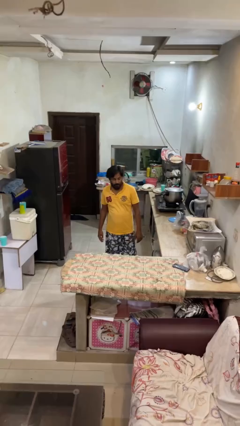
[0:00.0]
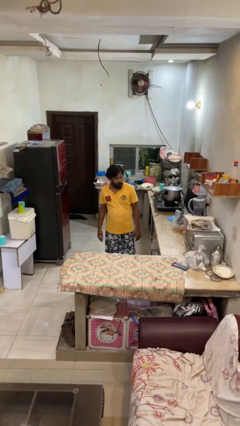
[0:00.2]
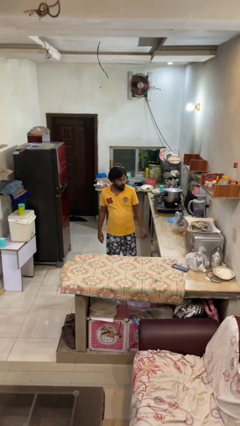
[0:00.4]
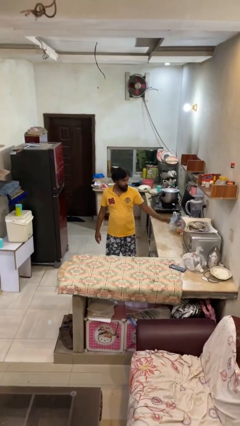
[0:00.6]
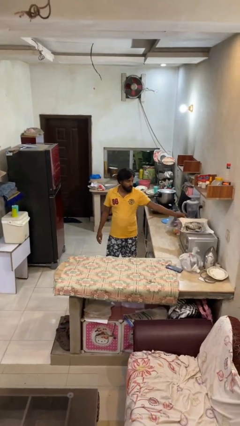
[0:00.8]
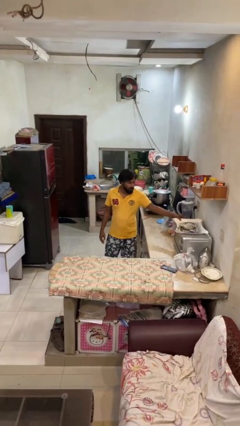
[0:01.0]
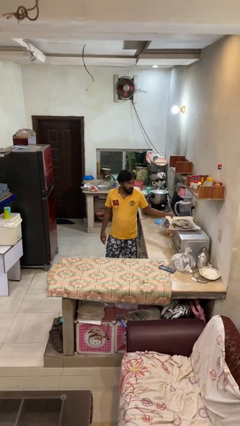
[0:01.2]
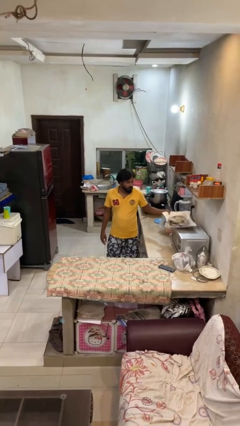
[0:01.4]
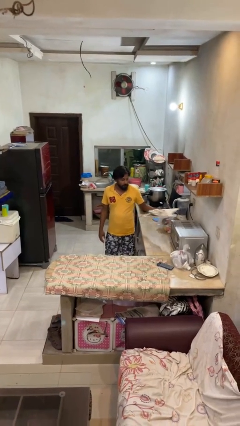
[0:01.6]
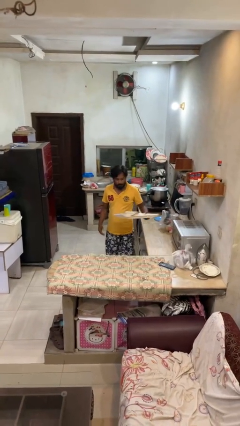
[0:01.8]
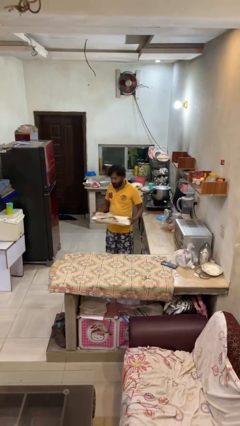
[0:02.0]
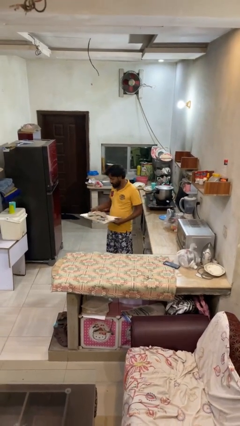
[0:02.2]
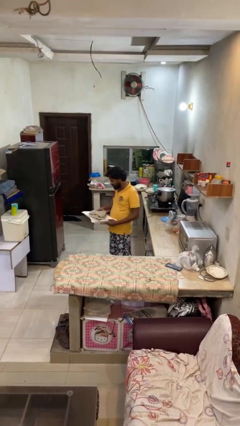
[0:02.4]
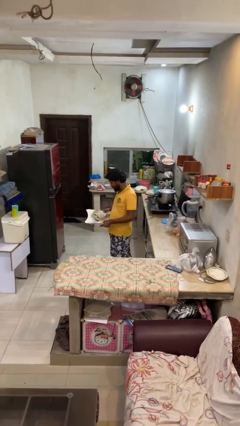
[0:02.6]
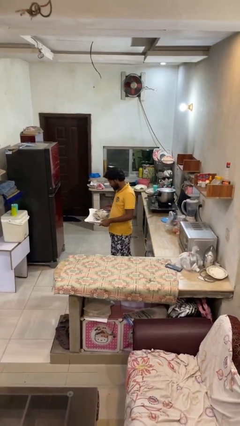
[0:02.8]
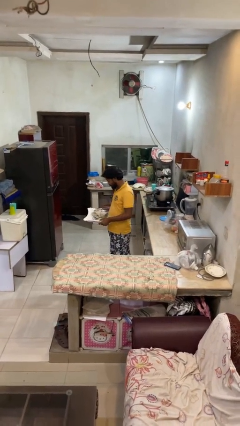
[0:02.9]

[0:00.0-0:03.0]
person picks up object from countertop

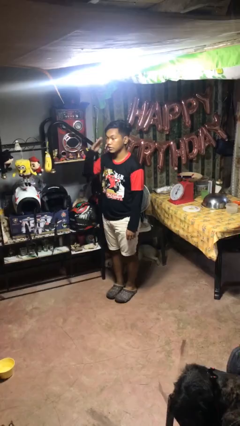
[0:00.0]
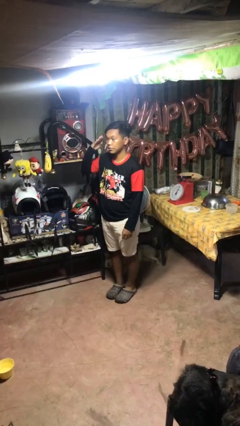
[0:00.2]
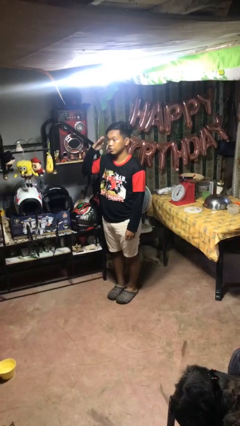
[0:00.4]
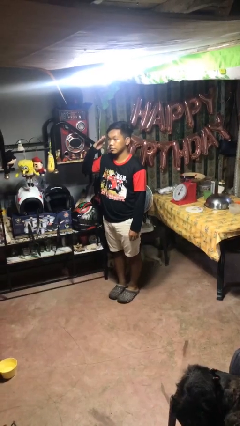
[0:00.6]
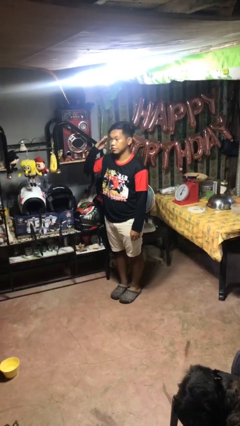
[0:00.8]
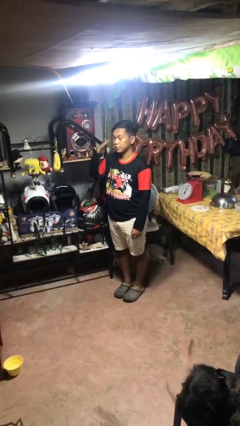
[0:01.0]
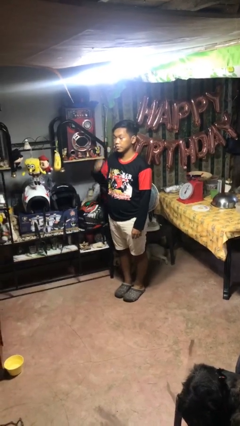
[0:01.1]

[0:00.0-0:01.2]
person salutes

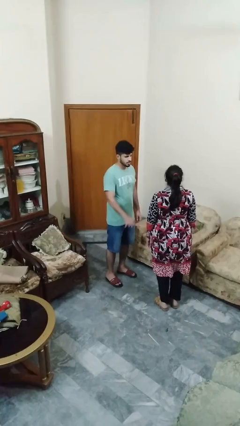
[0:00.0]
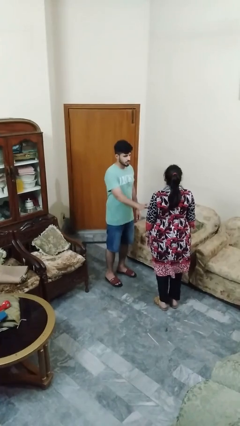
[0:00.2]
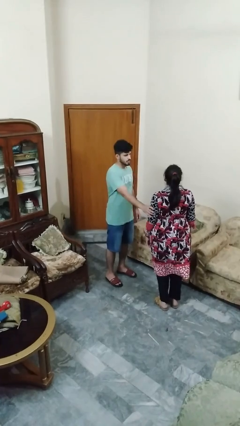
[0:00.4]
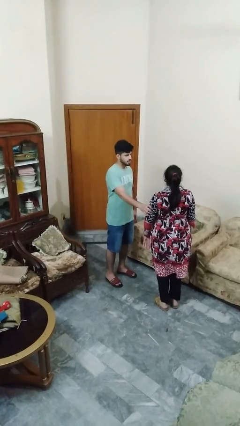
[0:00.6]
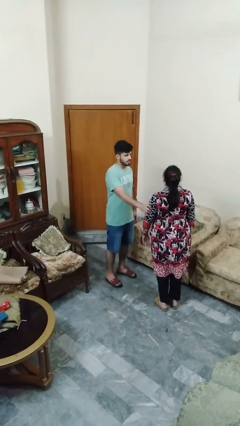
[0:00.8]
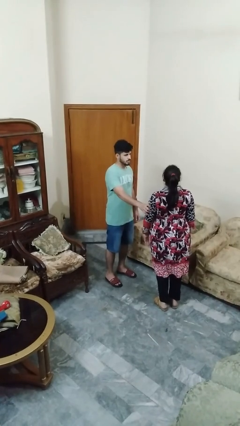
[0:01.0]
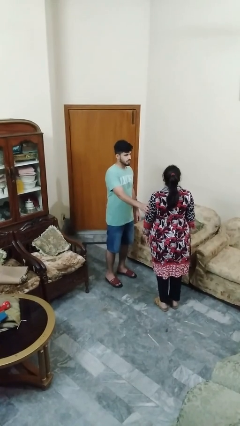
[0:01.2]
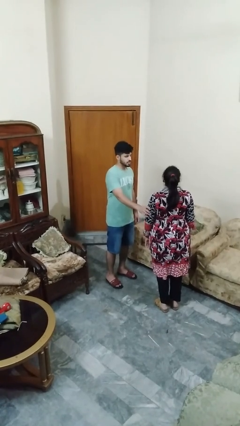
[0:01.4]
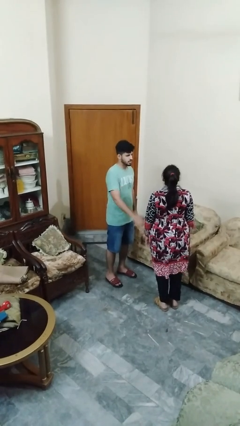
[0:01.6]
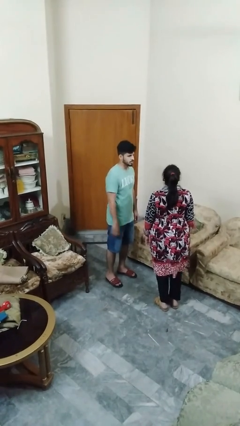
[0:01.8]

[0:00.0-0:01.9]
person grabs person by bicep

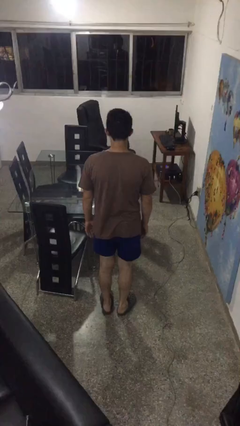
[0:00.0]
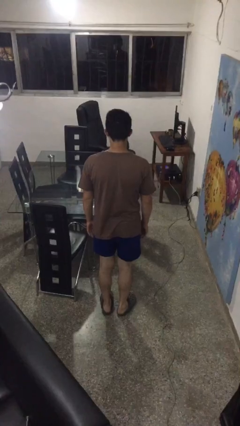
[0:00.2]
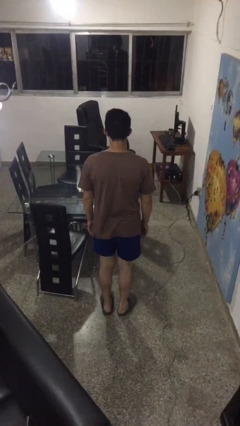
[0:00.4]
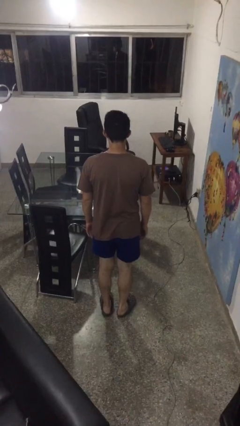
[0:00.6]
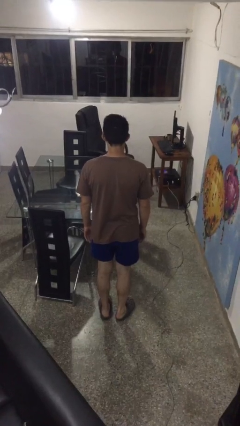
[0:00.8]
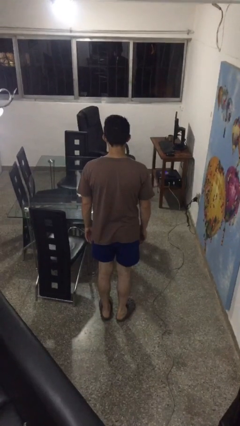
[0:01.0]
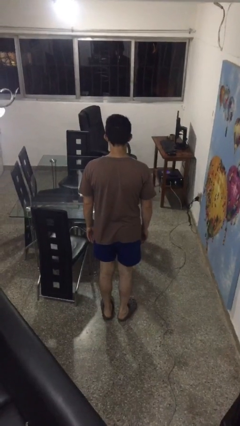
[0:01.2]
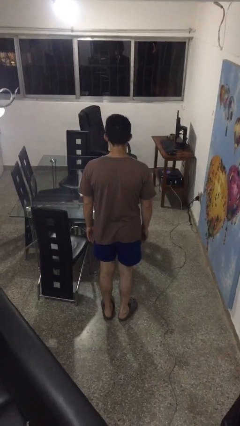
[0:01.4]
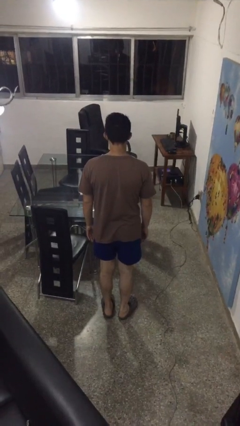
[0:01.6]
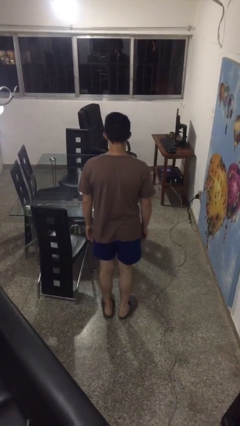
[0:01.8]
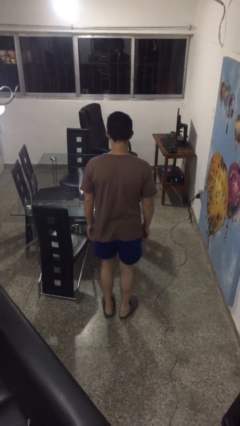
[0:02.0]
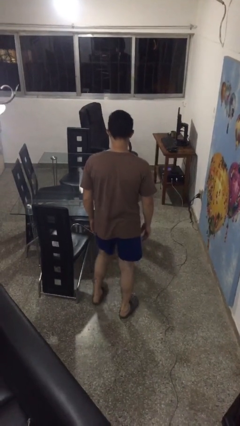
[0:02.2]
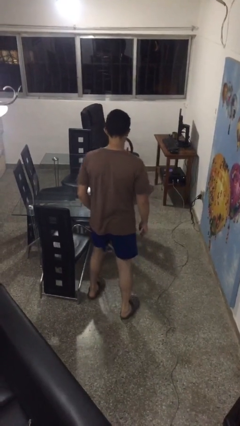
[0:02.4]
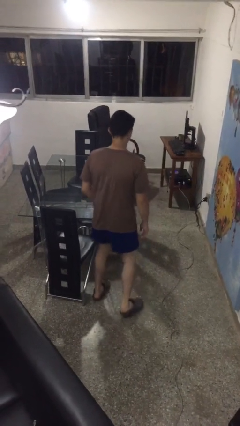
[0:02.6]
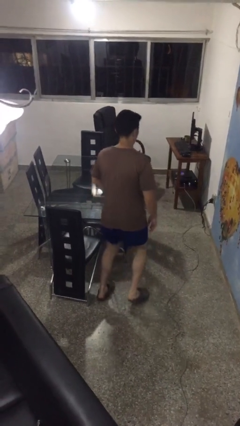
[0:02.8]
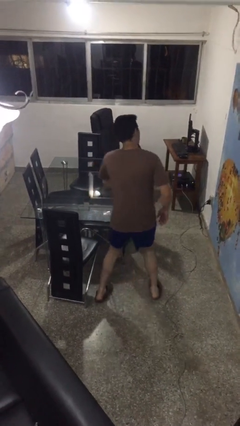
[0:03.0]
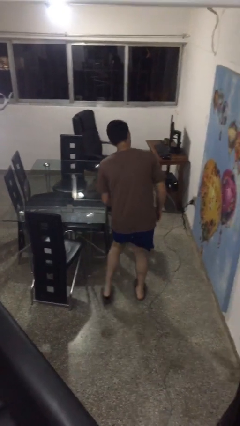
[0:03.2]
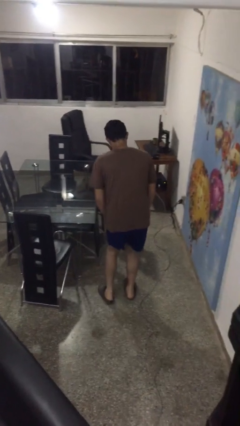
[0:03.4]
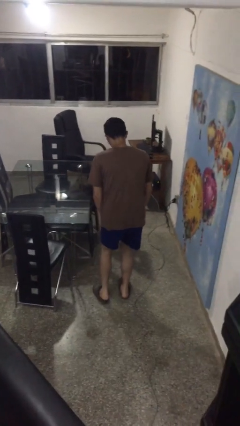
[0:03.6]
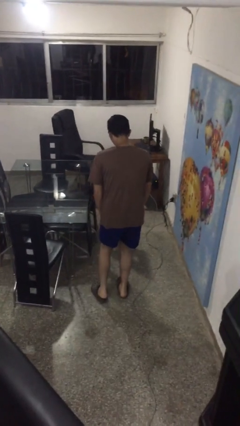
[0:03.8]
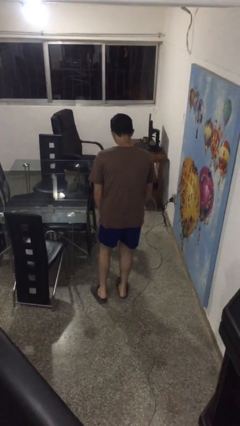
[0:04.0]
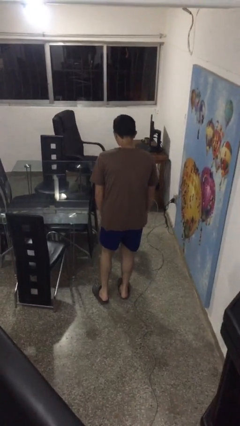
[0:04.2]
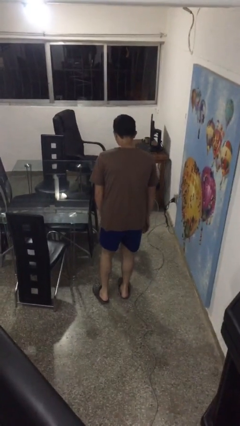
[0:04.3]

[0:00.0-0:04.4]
person bumps into table

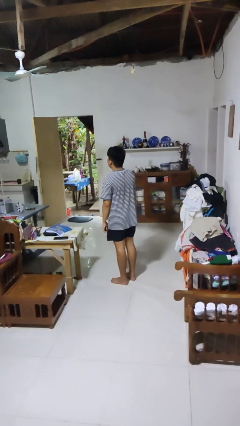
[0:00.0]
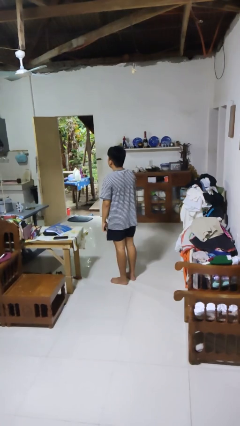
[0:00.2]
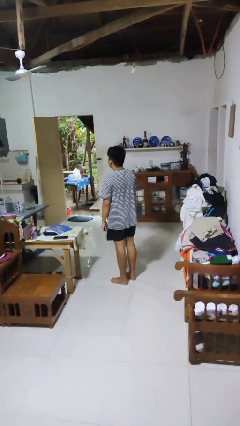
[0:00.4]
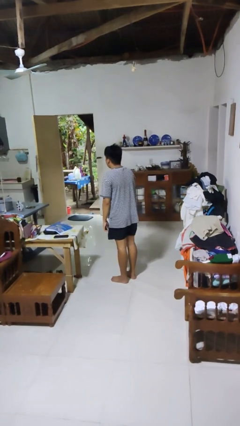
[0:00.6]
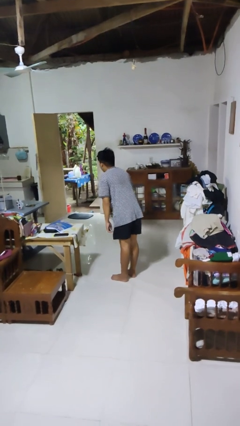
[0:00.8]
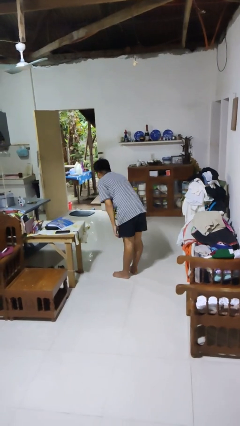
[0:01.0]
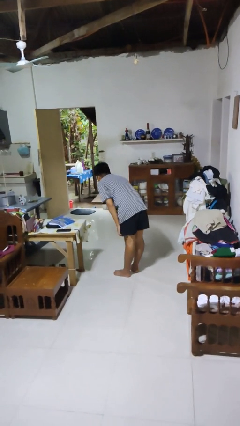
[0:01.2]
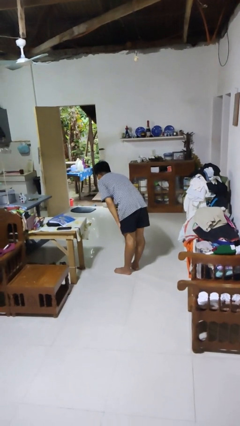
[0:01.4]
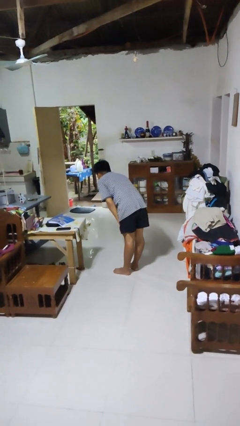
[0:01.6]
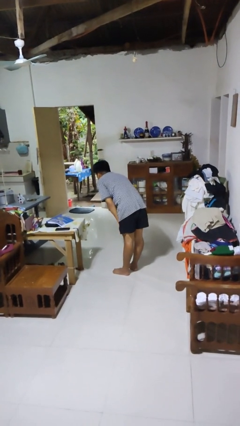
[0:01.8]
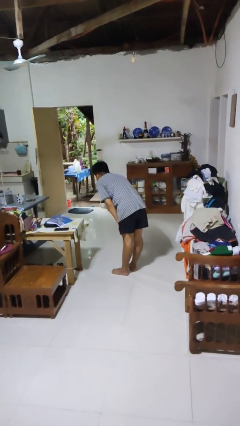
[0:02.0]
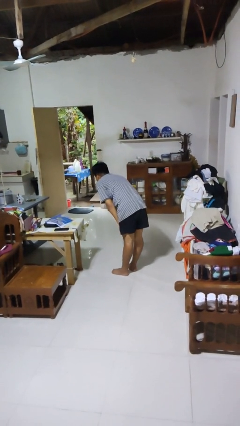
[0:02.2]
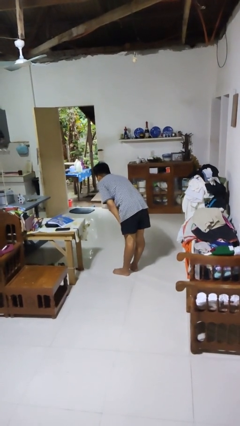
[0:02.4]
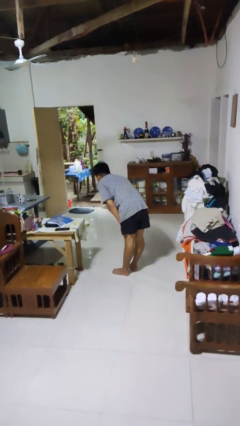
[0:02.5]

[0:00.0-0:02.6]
person bows

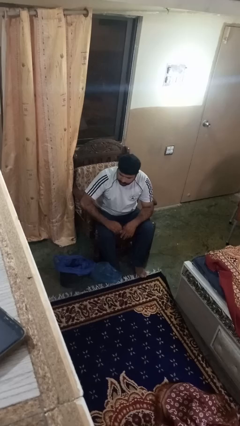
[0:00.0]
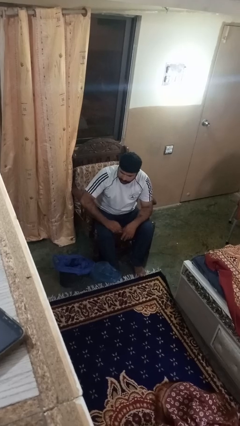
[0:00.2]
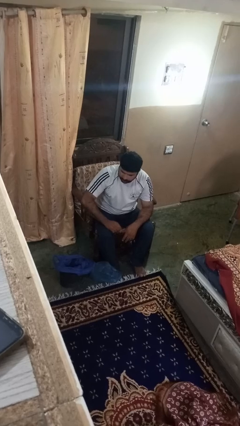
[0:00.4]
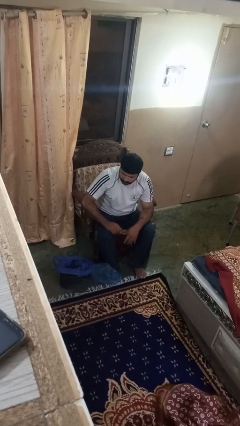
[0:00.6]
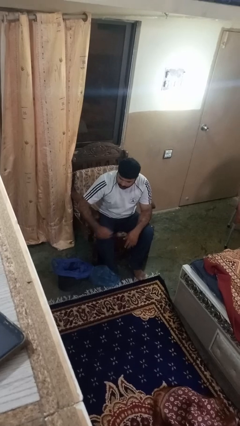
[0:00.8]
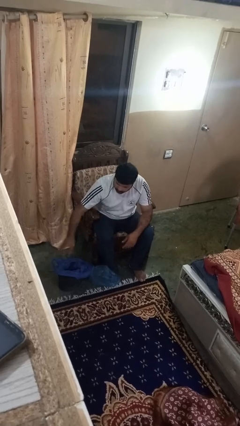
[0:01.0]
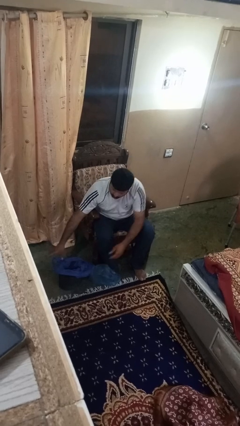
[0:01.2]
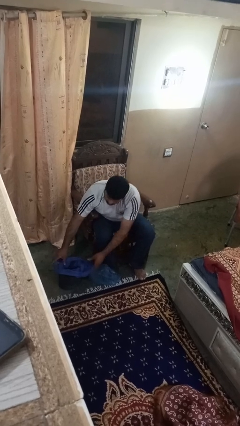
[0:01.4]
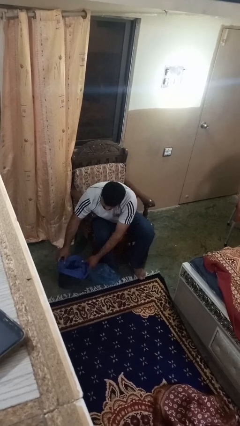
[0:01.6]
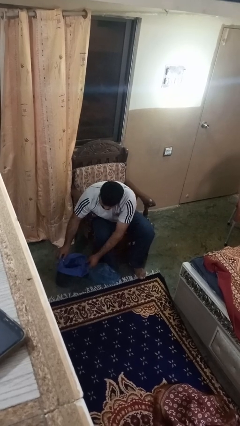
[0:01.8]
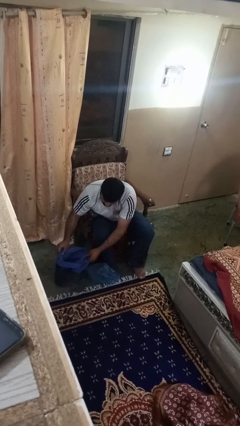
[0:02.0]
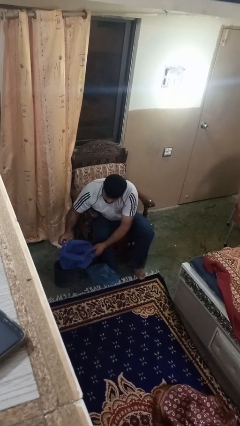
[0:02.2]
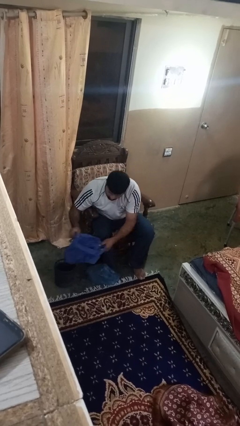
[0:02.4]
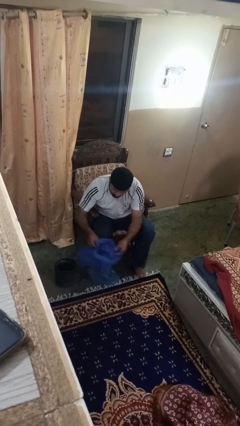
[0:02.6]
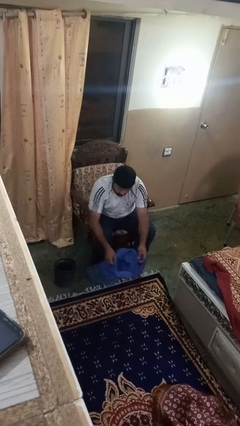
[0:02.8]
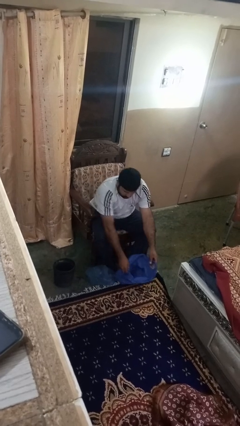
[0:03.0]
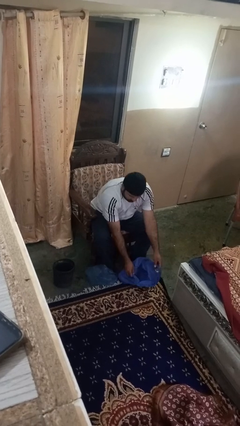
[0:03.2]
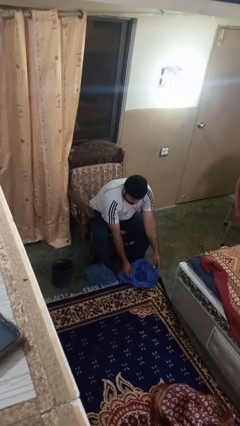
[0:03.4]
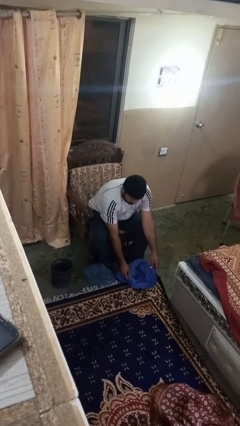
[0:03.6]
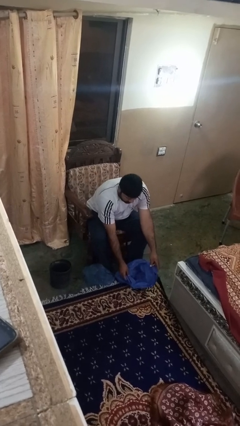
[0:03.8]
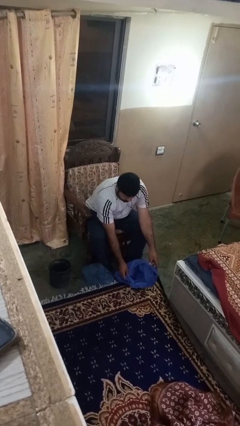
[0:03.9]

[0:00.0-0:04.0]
person removes trashbag from trashcan

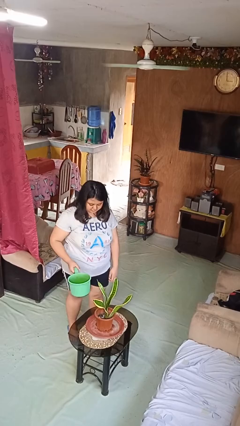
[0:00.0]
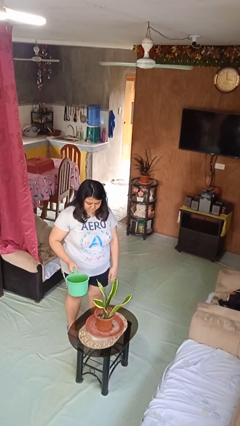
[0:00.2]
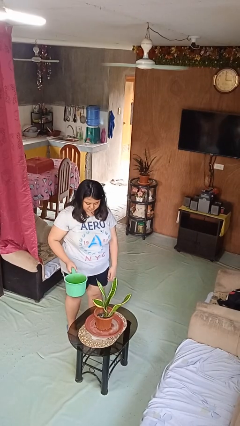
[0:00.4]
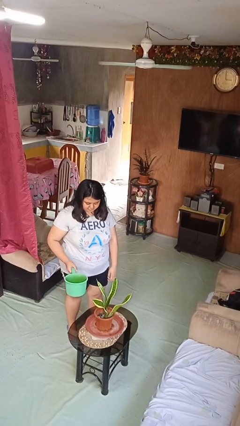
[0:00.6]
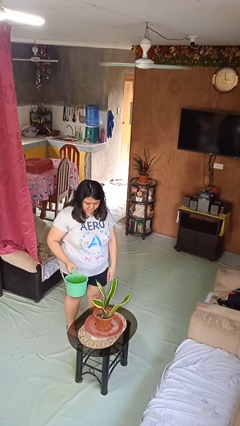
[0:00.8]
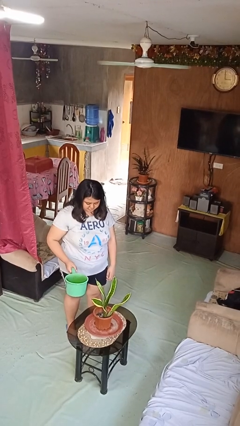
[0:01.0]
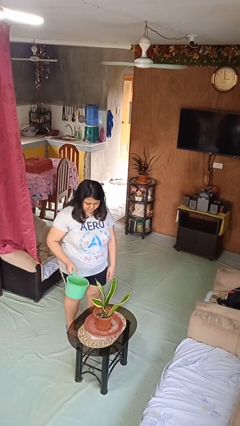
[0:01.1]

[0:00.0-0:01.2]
person waters houseplant
